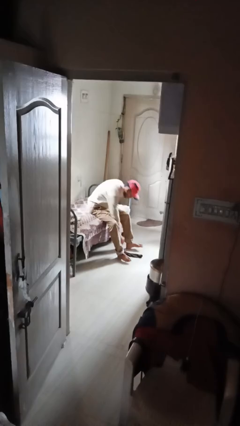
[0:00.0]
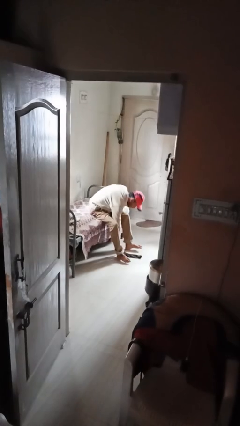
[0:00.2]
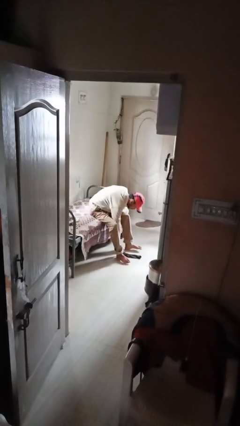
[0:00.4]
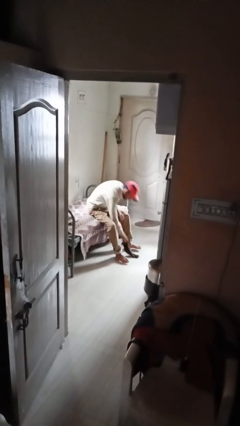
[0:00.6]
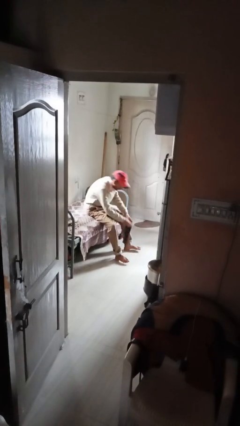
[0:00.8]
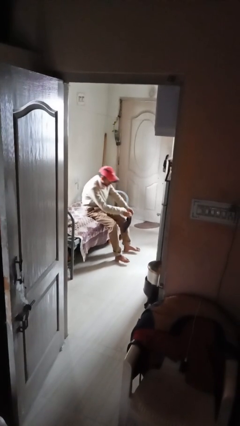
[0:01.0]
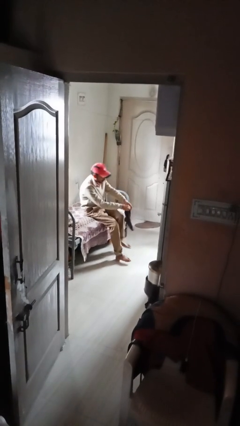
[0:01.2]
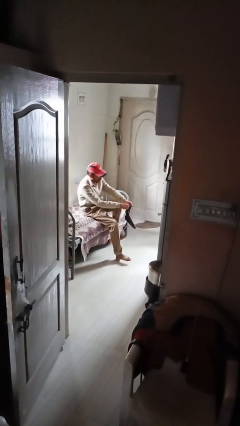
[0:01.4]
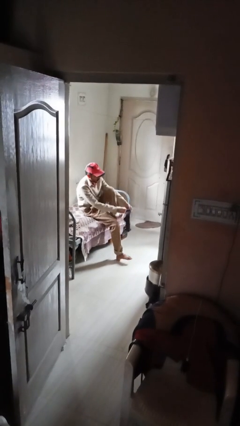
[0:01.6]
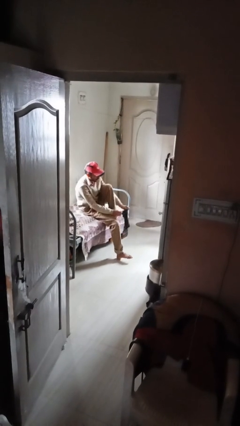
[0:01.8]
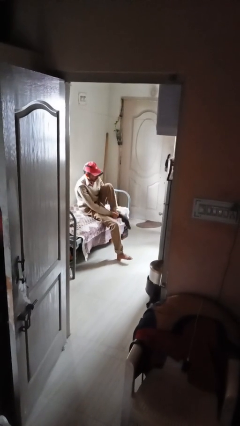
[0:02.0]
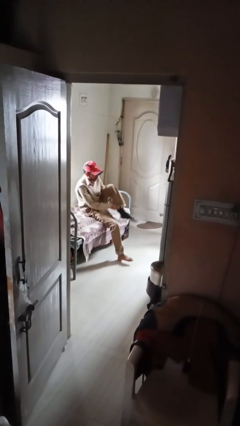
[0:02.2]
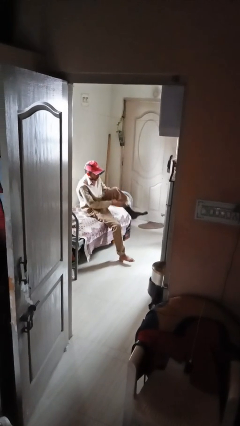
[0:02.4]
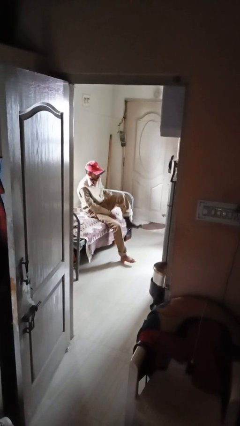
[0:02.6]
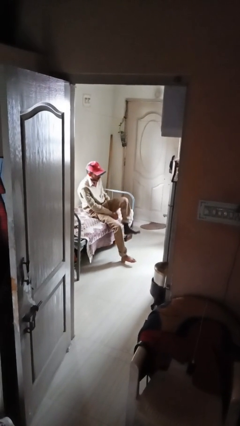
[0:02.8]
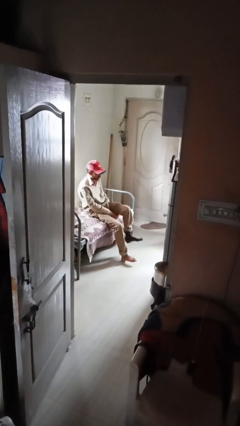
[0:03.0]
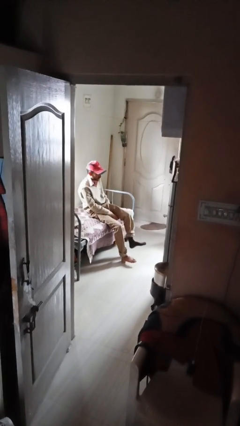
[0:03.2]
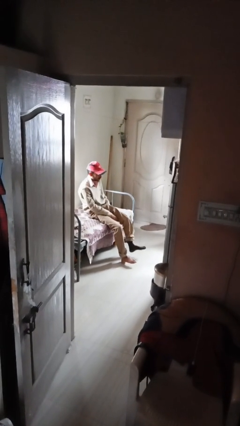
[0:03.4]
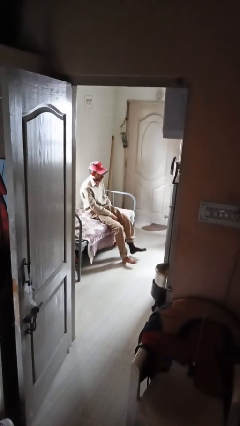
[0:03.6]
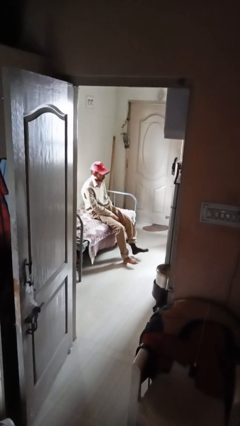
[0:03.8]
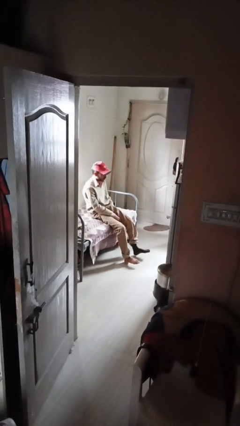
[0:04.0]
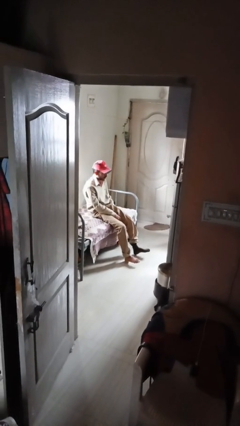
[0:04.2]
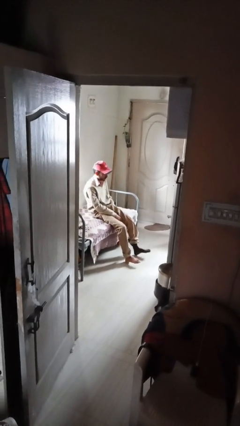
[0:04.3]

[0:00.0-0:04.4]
person puts on socks

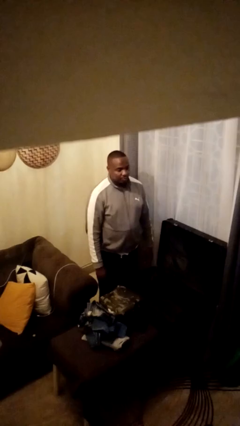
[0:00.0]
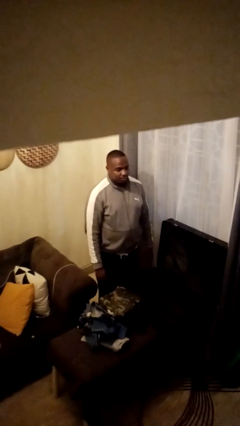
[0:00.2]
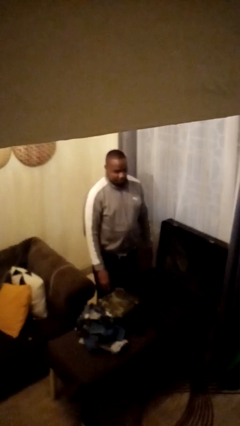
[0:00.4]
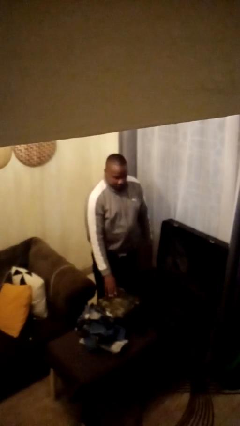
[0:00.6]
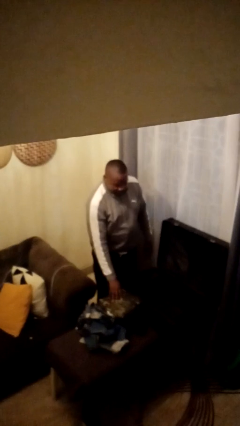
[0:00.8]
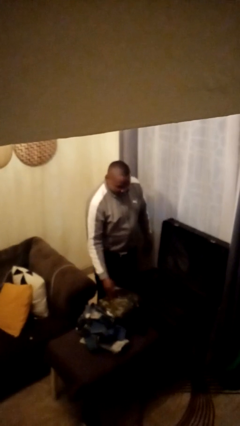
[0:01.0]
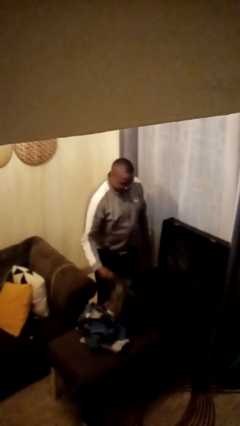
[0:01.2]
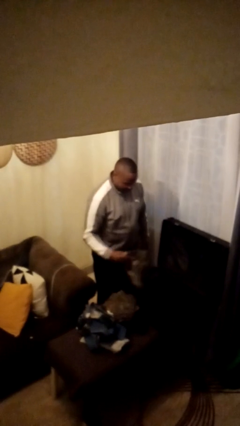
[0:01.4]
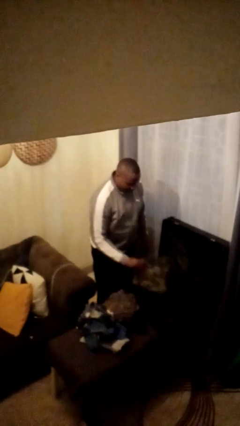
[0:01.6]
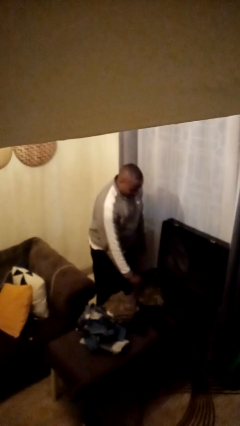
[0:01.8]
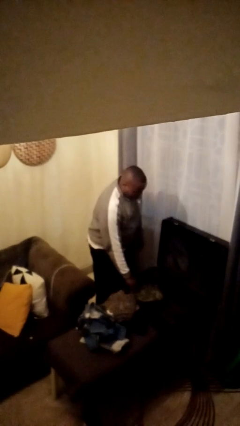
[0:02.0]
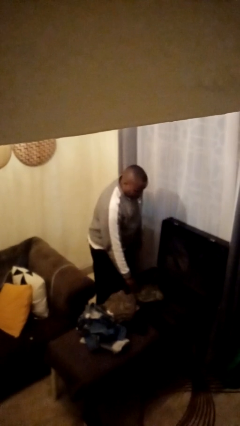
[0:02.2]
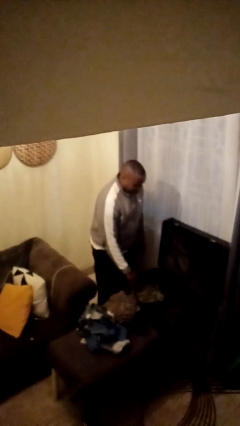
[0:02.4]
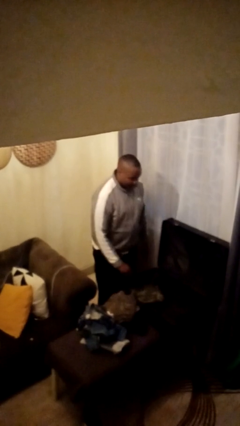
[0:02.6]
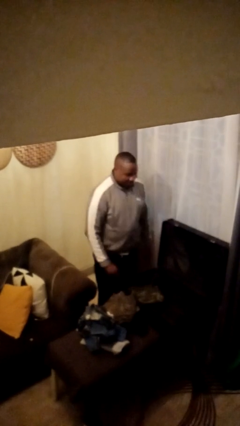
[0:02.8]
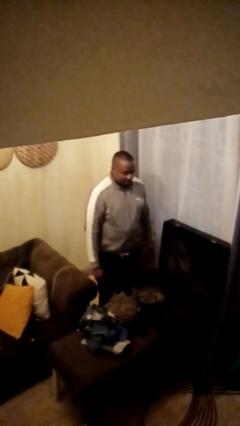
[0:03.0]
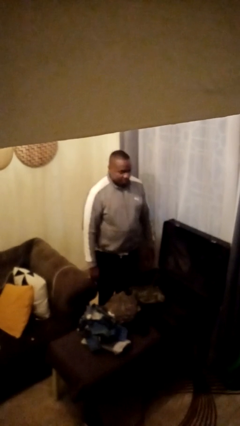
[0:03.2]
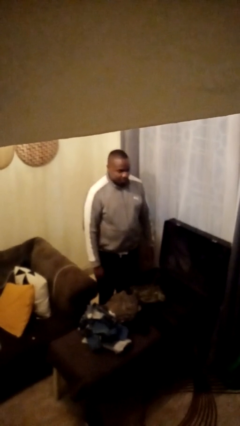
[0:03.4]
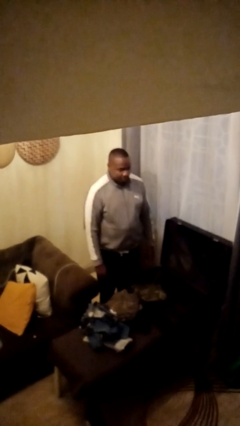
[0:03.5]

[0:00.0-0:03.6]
person loads clothes into suitcase

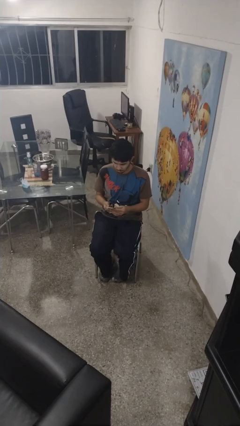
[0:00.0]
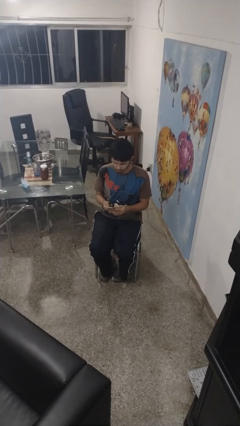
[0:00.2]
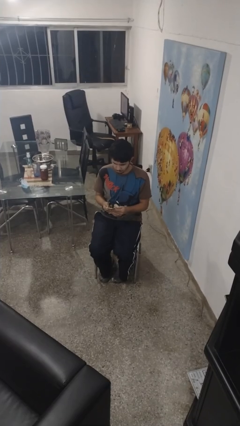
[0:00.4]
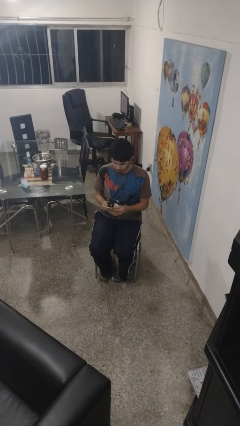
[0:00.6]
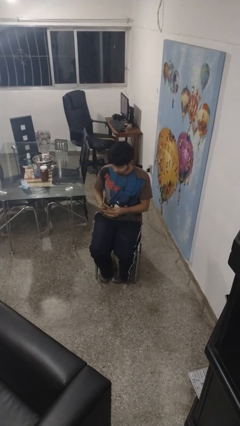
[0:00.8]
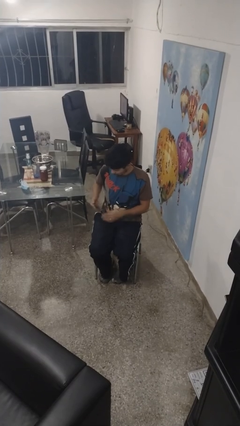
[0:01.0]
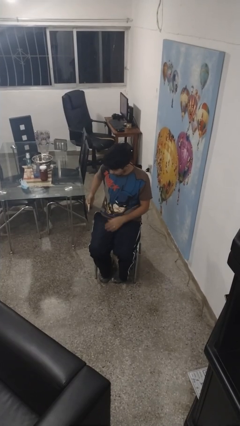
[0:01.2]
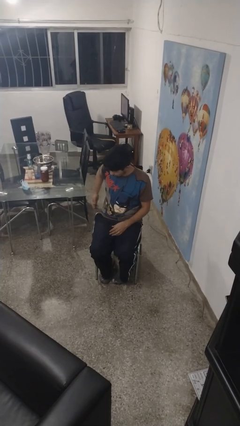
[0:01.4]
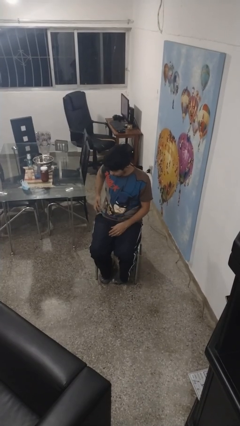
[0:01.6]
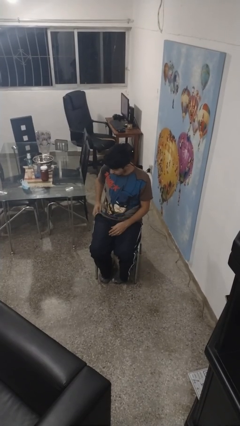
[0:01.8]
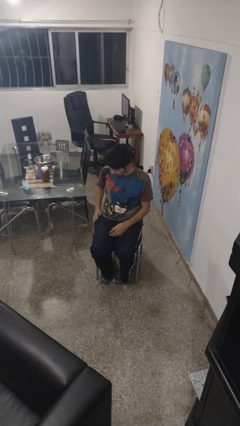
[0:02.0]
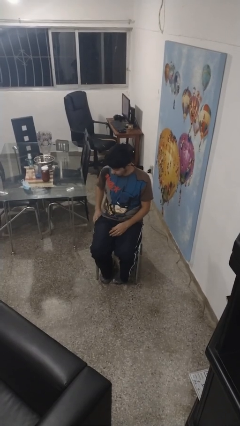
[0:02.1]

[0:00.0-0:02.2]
person puts phone into pocket

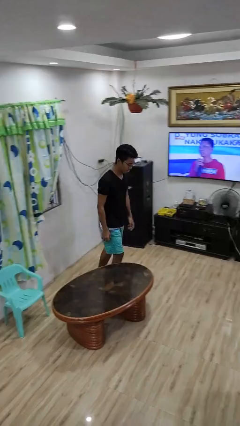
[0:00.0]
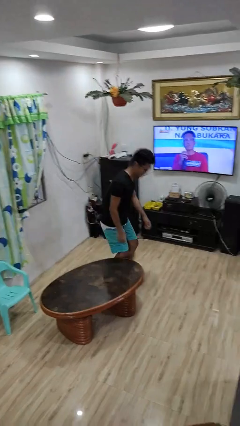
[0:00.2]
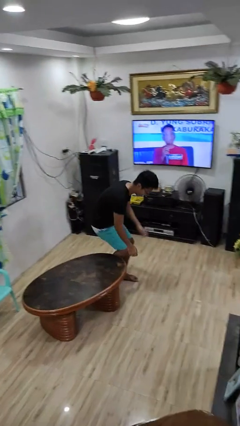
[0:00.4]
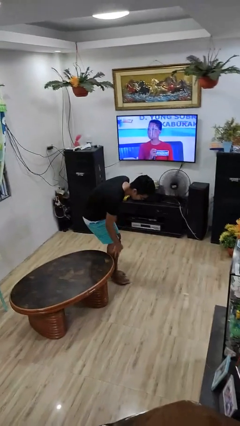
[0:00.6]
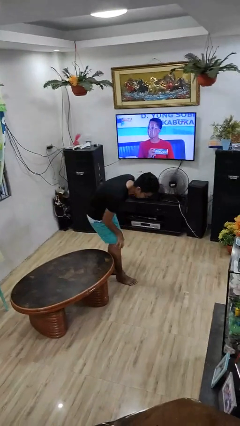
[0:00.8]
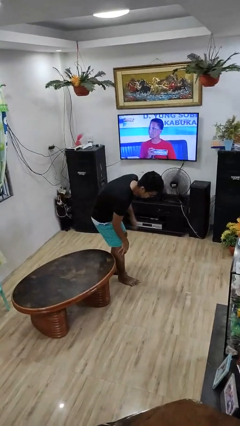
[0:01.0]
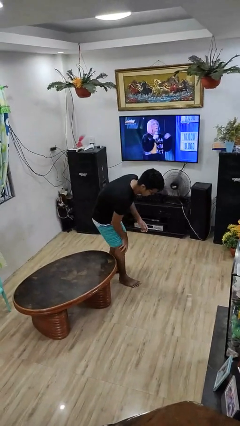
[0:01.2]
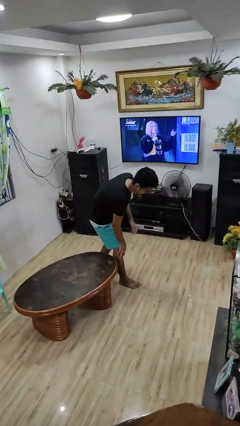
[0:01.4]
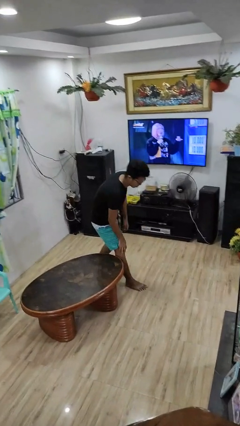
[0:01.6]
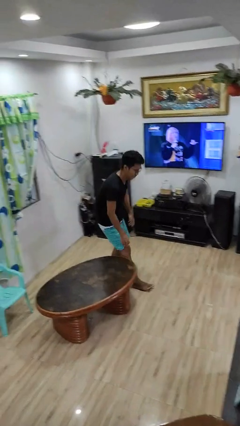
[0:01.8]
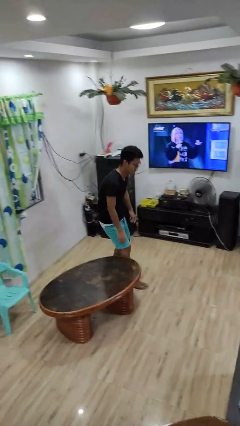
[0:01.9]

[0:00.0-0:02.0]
person bumps into table

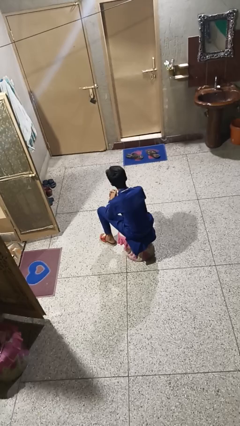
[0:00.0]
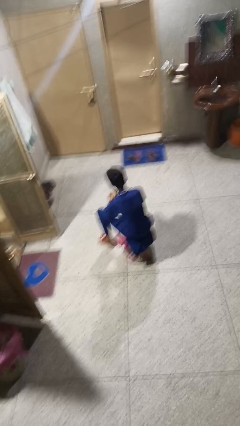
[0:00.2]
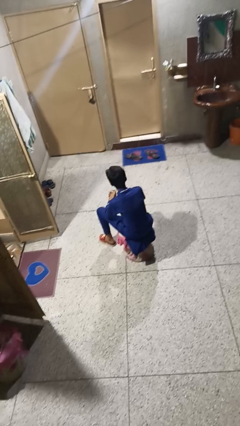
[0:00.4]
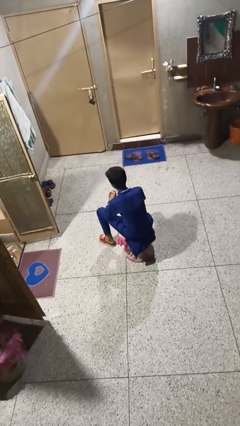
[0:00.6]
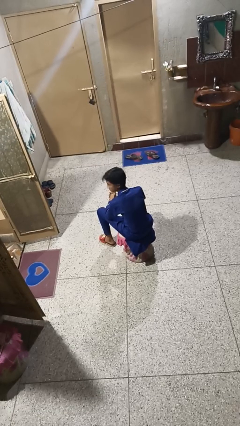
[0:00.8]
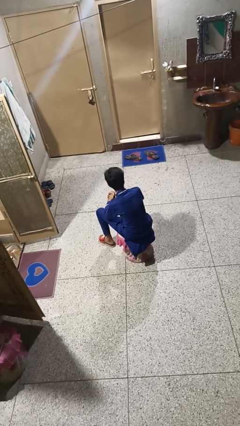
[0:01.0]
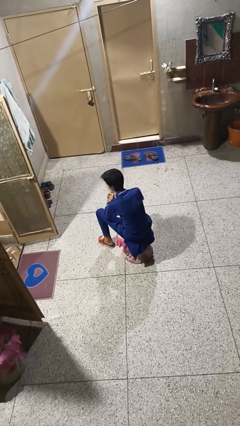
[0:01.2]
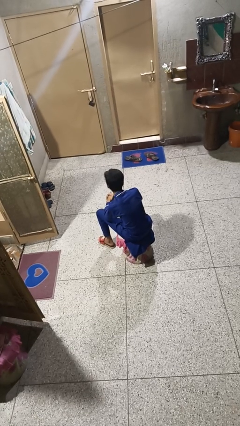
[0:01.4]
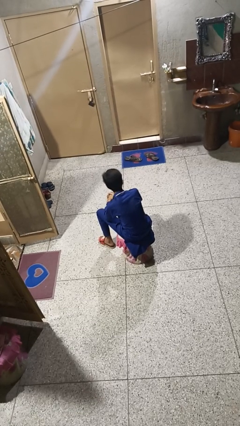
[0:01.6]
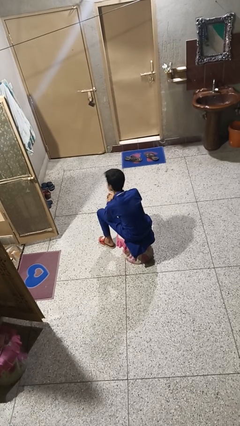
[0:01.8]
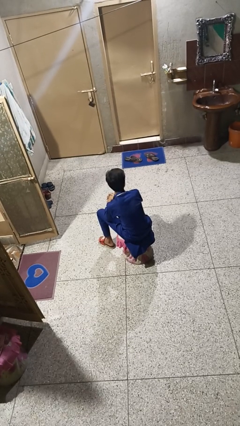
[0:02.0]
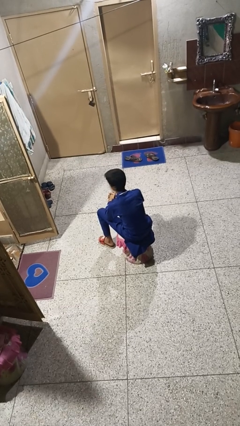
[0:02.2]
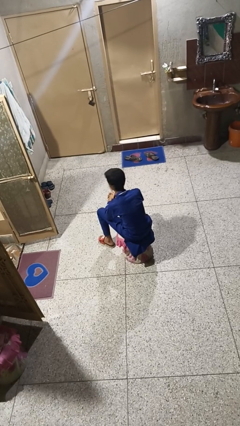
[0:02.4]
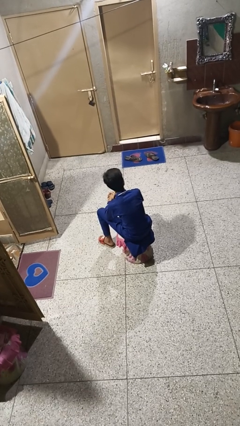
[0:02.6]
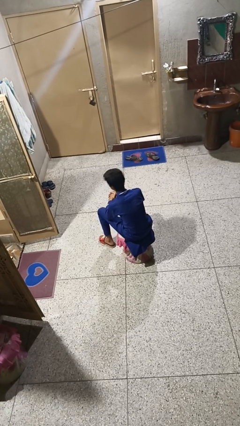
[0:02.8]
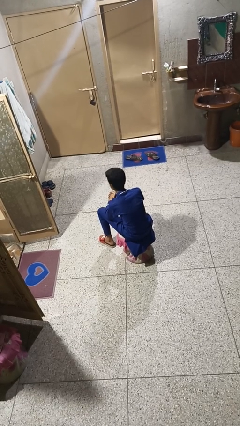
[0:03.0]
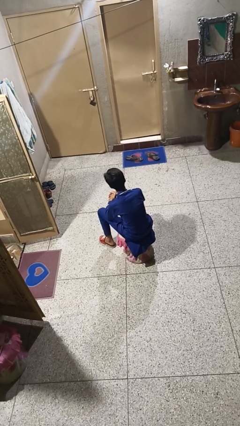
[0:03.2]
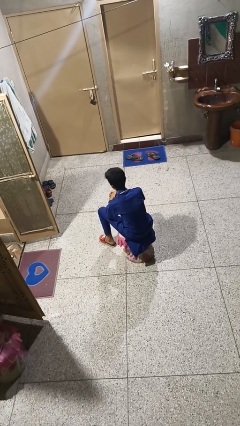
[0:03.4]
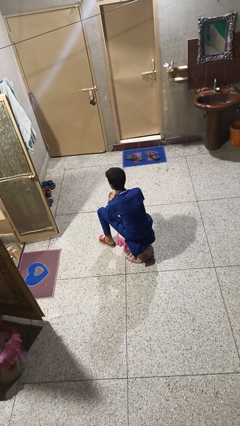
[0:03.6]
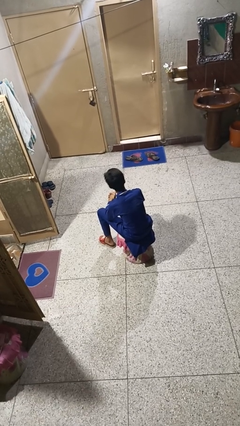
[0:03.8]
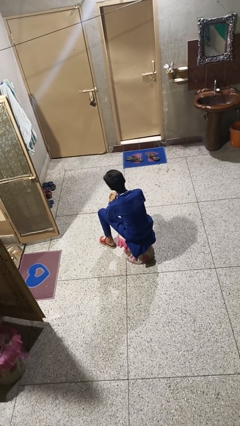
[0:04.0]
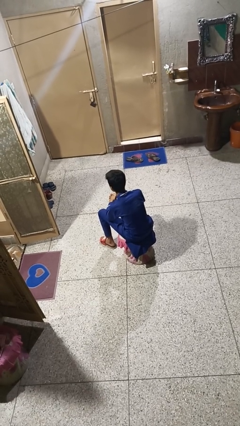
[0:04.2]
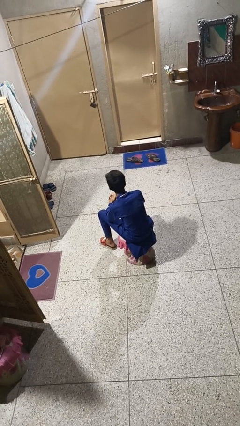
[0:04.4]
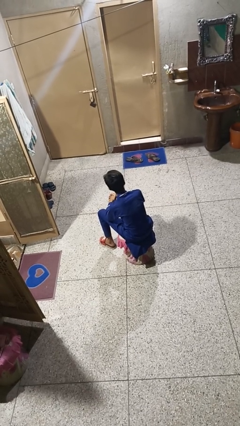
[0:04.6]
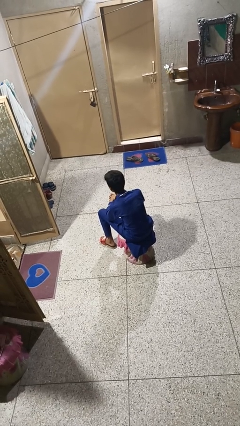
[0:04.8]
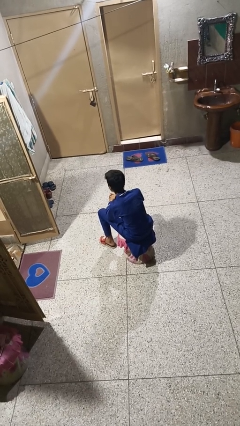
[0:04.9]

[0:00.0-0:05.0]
person shakes head

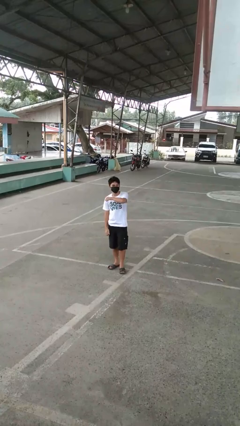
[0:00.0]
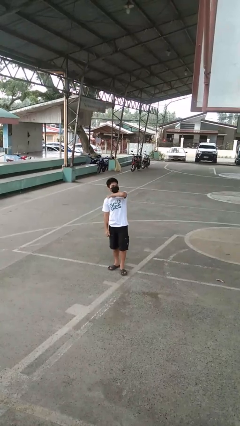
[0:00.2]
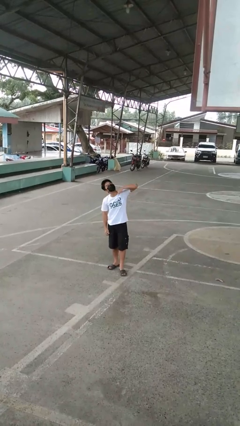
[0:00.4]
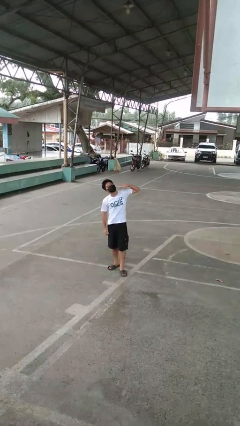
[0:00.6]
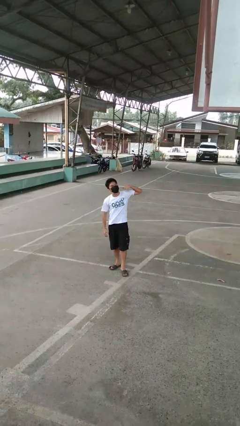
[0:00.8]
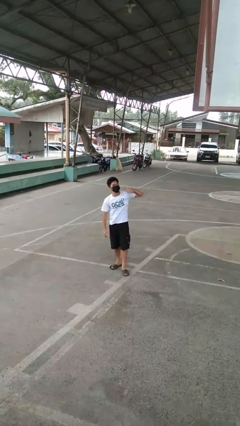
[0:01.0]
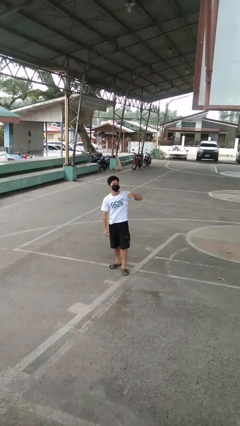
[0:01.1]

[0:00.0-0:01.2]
person gestures cut
